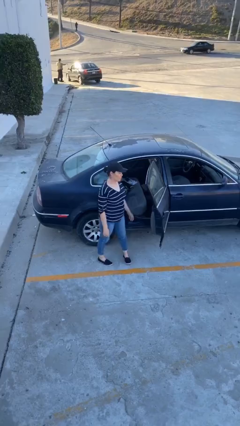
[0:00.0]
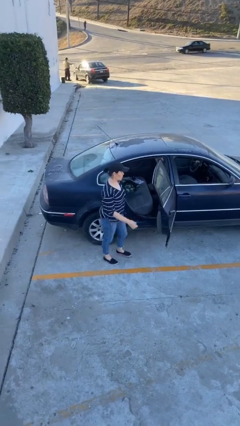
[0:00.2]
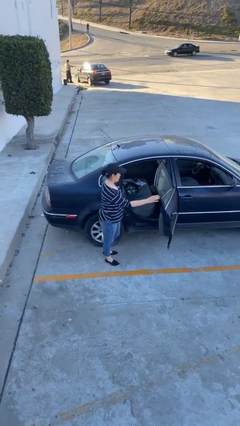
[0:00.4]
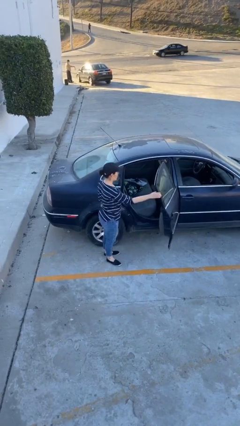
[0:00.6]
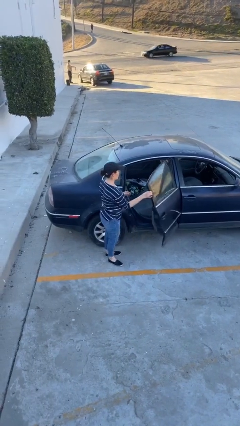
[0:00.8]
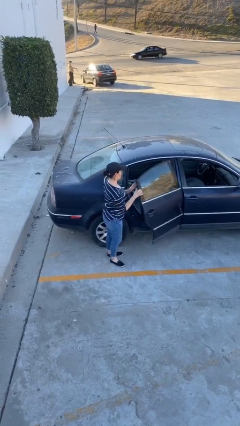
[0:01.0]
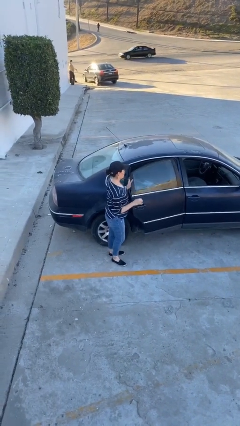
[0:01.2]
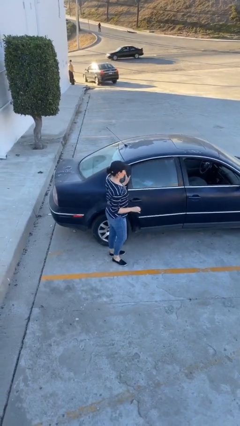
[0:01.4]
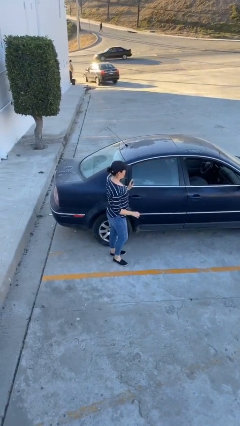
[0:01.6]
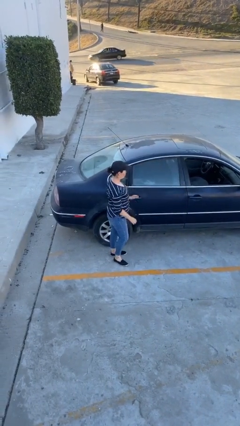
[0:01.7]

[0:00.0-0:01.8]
person closes car door

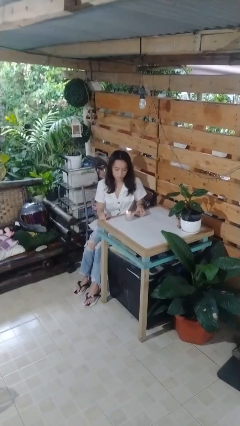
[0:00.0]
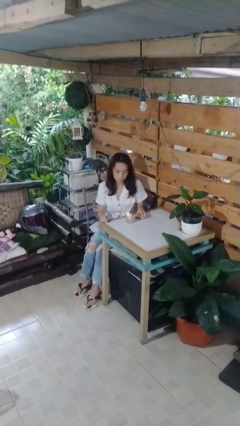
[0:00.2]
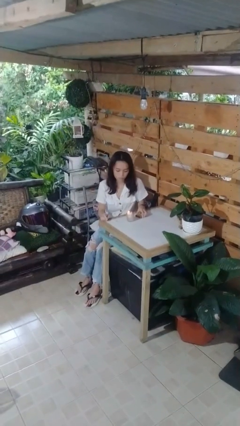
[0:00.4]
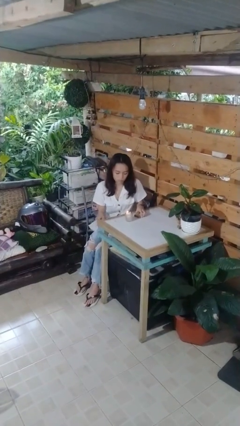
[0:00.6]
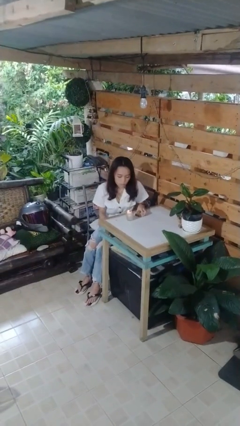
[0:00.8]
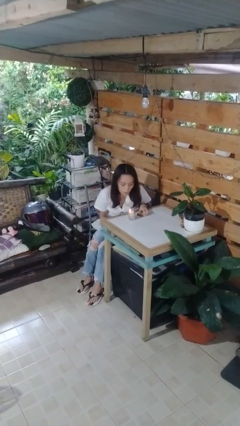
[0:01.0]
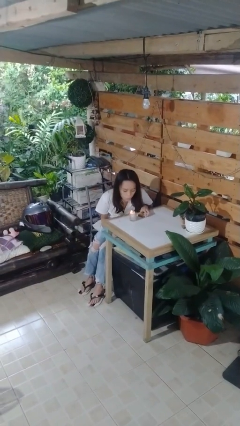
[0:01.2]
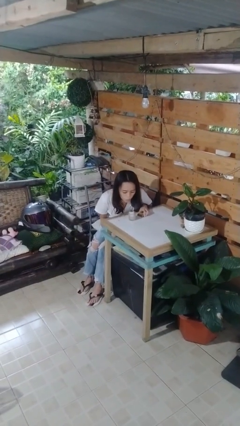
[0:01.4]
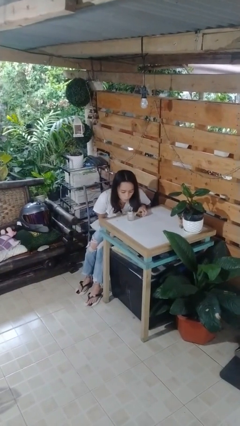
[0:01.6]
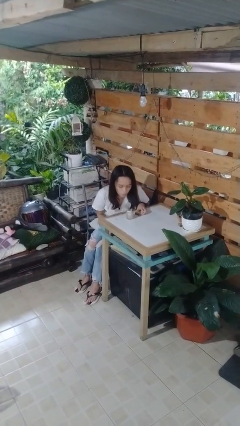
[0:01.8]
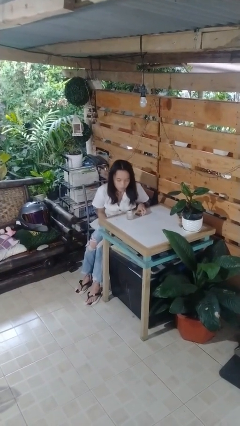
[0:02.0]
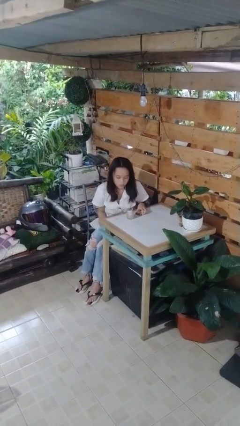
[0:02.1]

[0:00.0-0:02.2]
person extinguishes candle

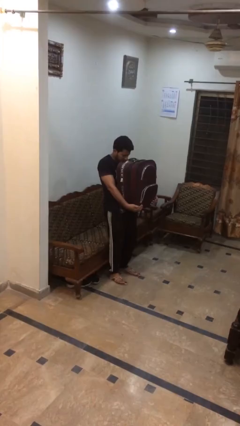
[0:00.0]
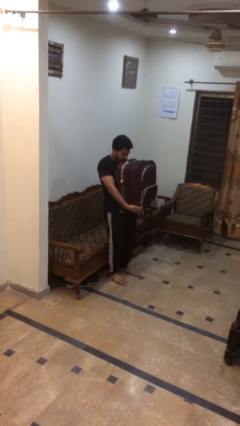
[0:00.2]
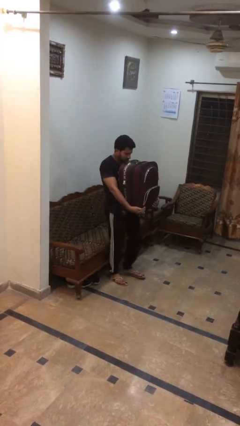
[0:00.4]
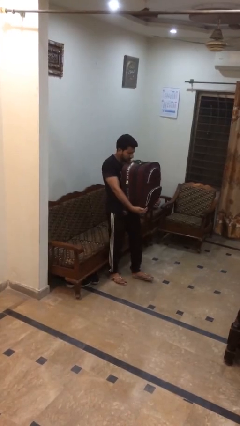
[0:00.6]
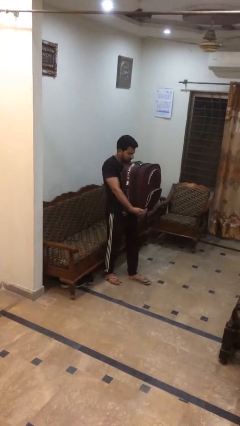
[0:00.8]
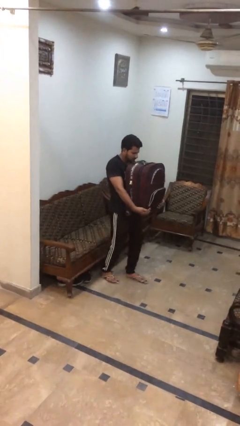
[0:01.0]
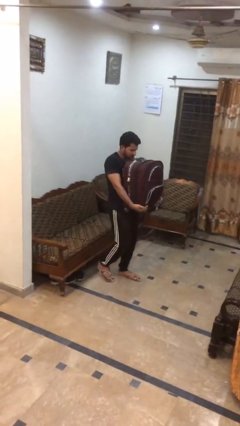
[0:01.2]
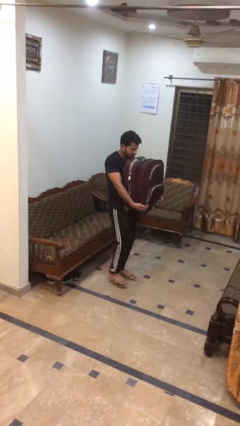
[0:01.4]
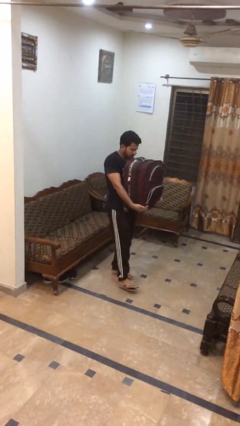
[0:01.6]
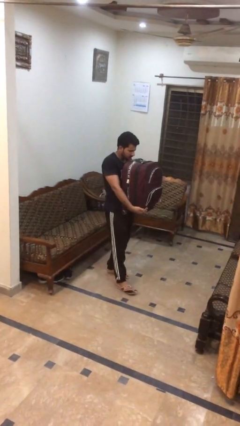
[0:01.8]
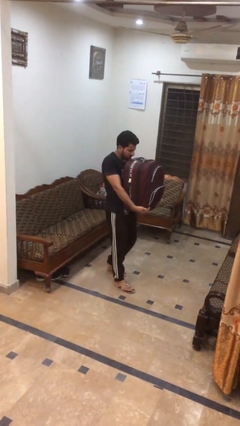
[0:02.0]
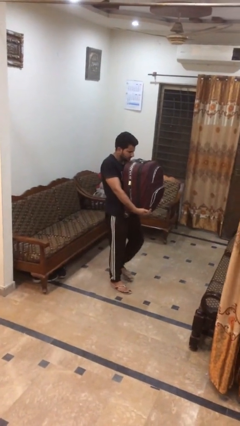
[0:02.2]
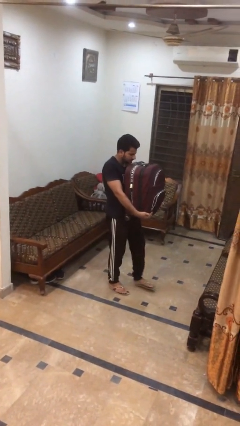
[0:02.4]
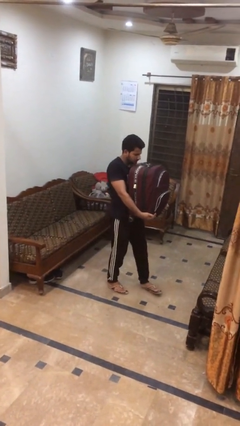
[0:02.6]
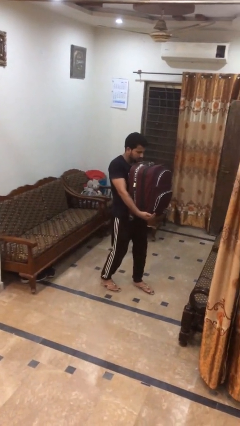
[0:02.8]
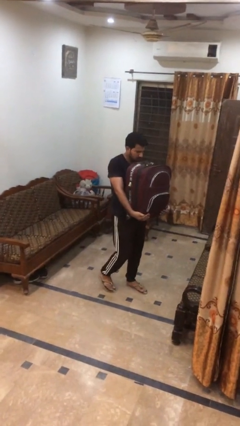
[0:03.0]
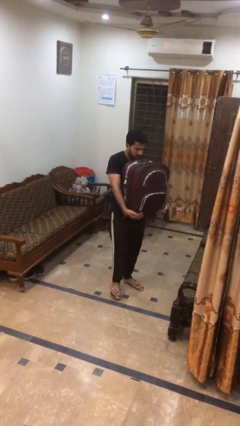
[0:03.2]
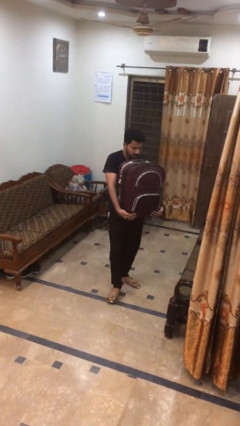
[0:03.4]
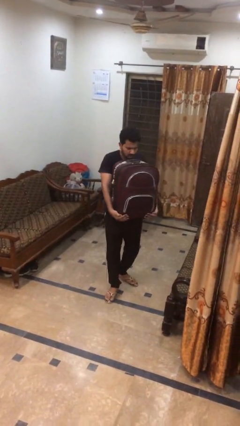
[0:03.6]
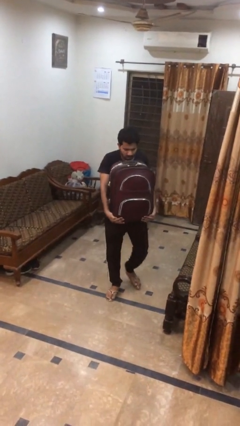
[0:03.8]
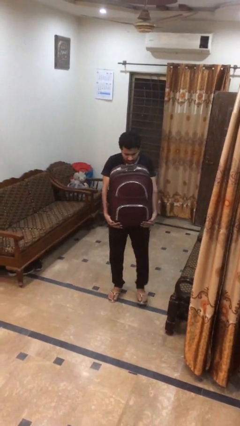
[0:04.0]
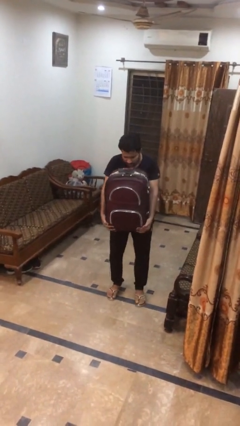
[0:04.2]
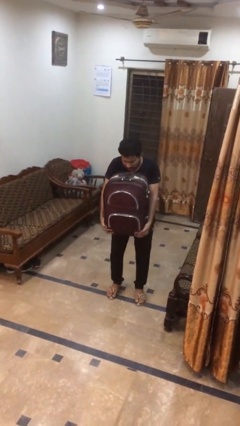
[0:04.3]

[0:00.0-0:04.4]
person carries heavy object

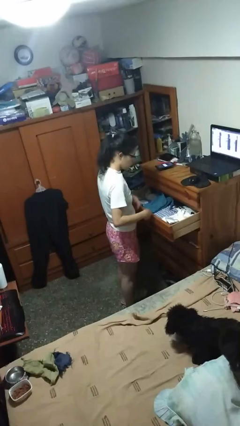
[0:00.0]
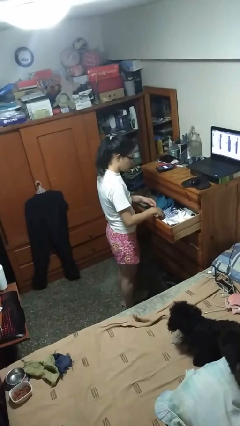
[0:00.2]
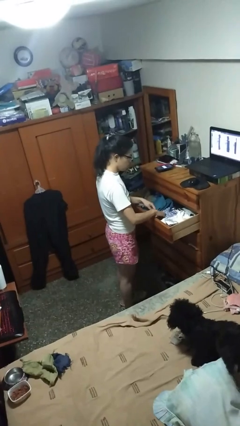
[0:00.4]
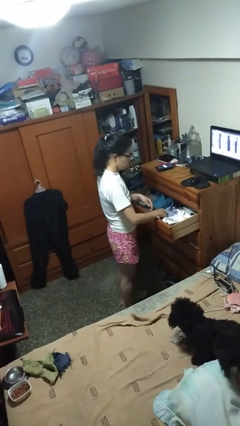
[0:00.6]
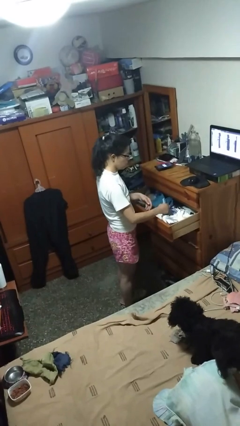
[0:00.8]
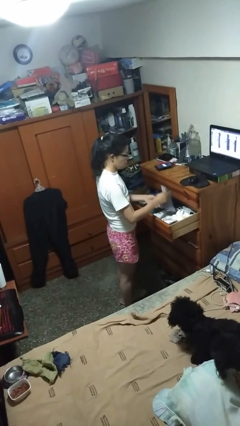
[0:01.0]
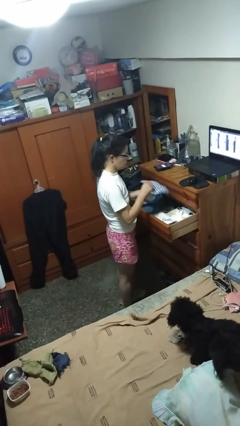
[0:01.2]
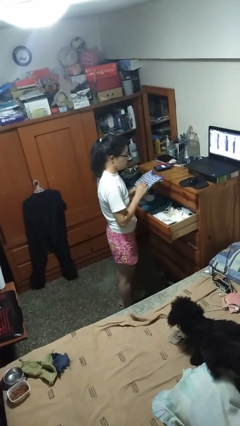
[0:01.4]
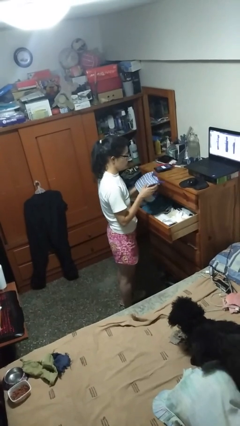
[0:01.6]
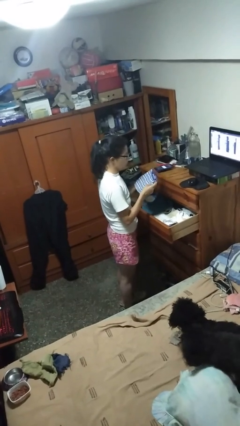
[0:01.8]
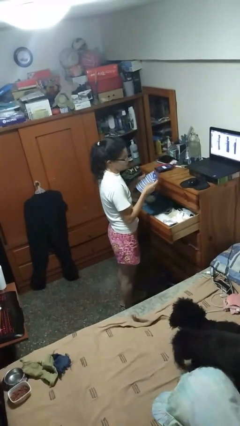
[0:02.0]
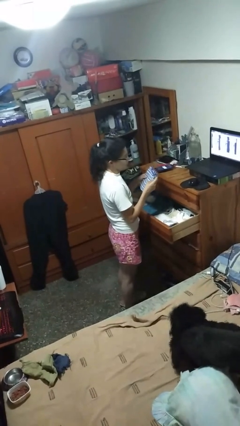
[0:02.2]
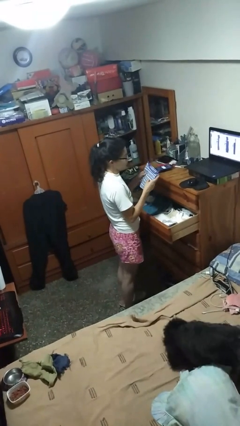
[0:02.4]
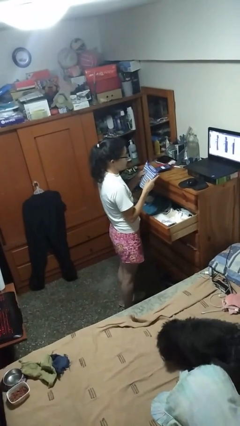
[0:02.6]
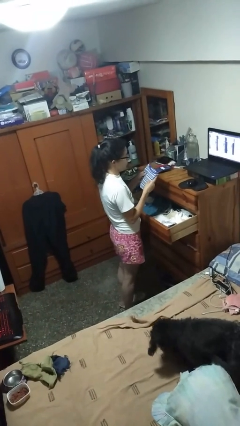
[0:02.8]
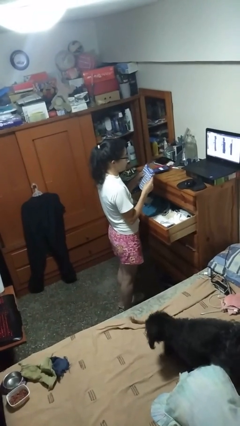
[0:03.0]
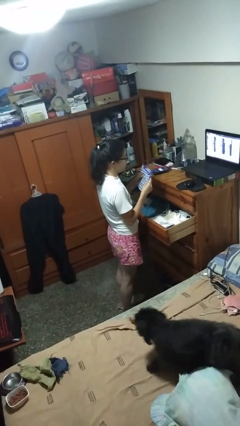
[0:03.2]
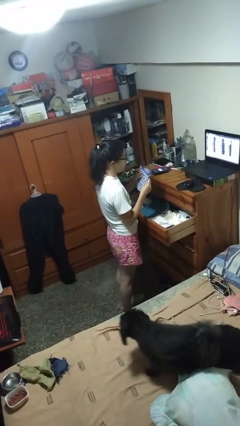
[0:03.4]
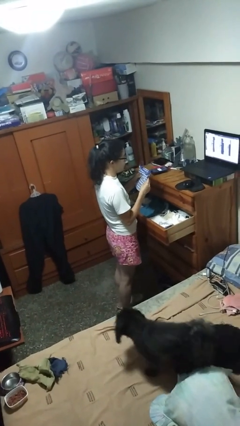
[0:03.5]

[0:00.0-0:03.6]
person takes clothes from dresser

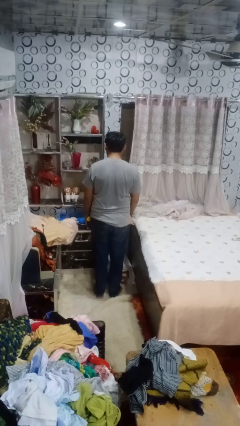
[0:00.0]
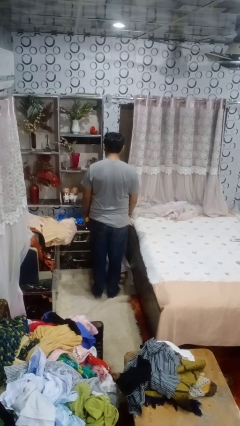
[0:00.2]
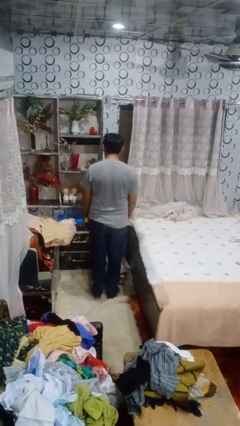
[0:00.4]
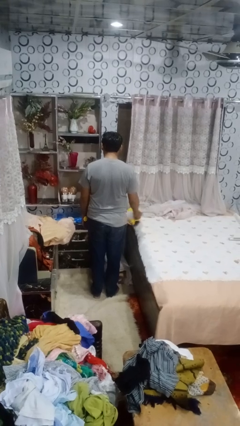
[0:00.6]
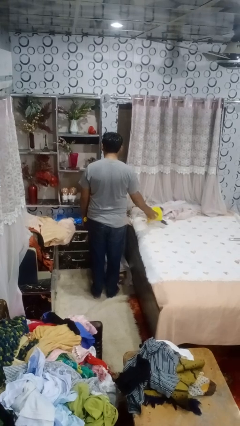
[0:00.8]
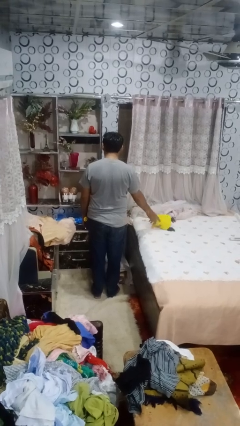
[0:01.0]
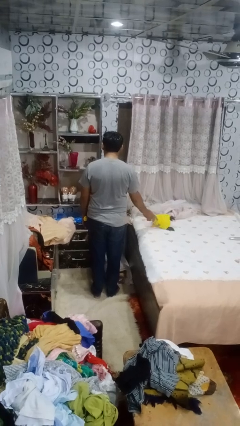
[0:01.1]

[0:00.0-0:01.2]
person throws object on bed

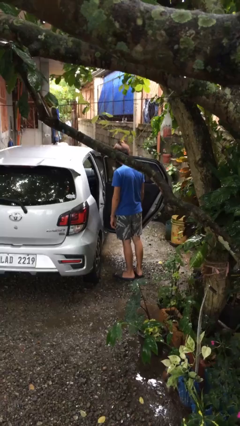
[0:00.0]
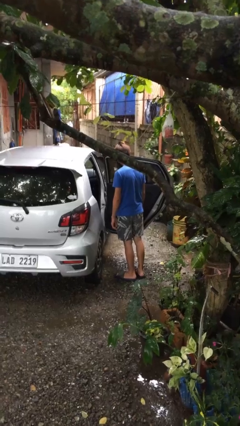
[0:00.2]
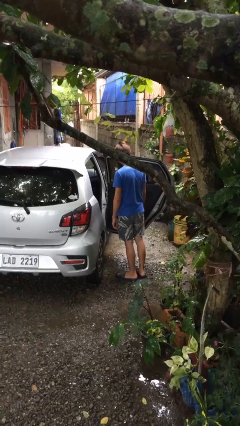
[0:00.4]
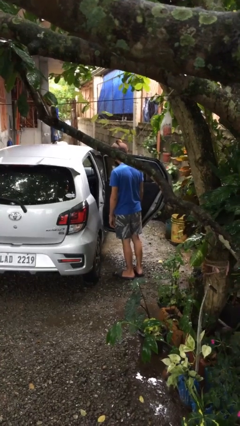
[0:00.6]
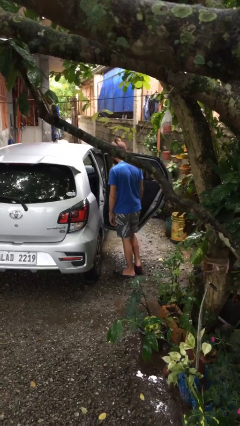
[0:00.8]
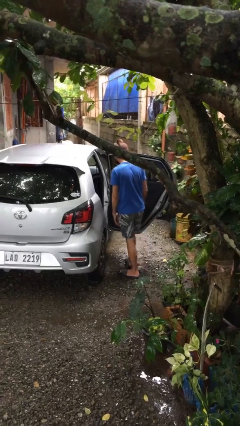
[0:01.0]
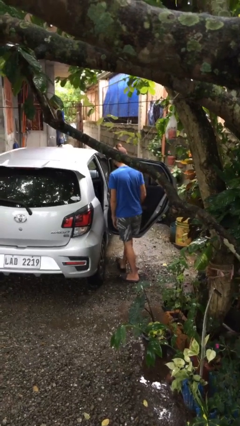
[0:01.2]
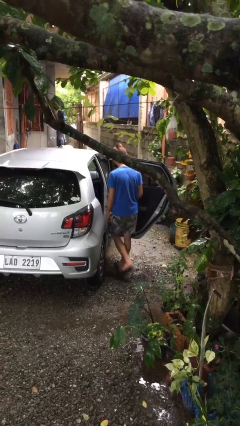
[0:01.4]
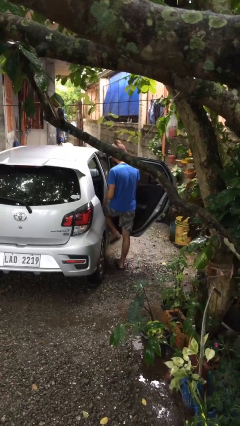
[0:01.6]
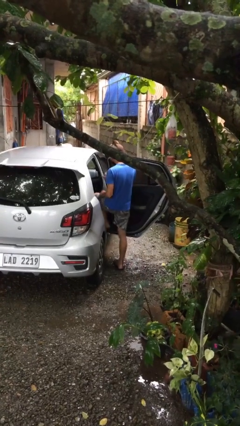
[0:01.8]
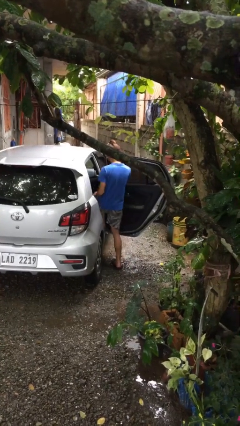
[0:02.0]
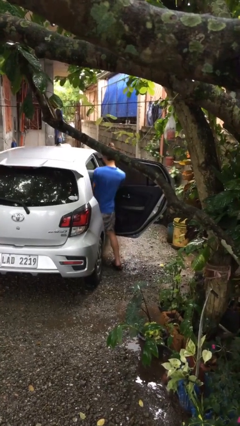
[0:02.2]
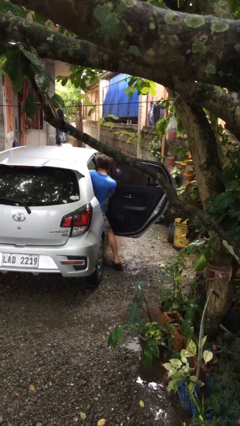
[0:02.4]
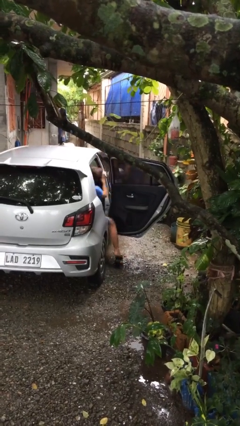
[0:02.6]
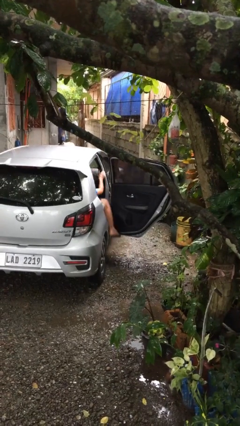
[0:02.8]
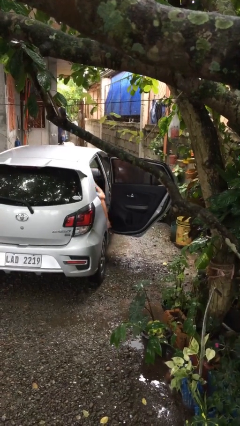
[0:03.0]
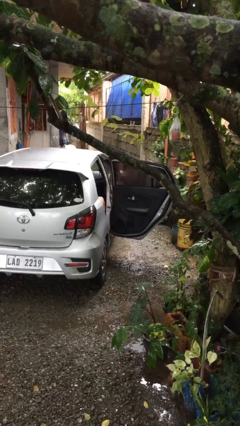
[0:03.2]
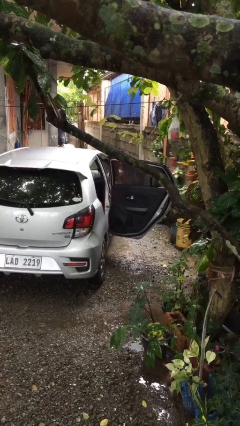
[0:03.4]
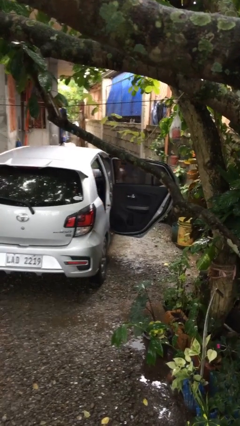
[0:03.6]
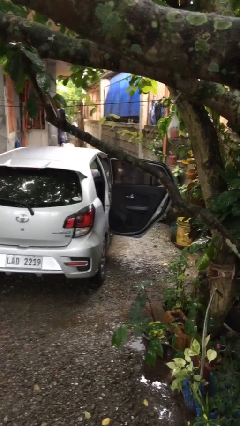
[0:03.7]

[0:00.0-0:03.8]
person enters car

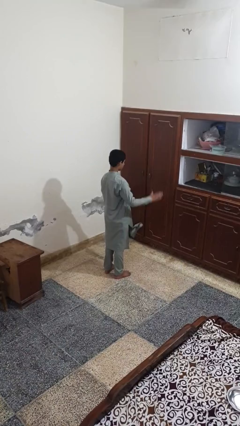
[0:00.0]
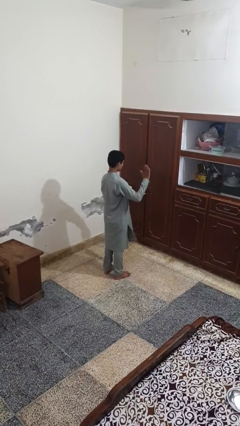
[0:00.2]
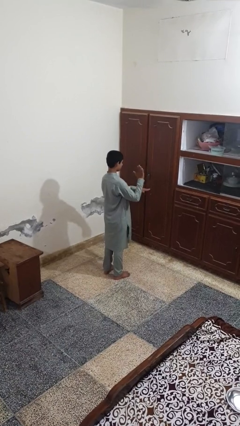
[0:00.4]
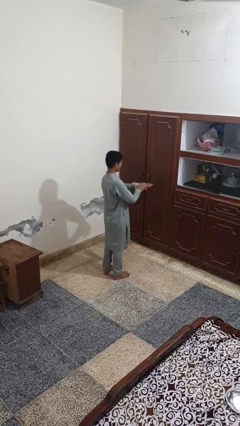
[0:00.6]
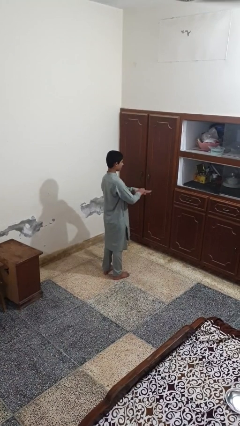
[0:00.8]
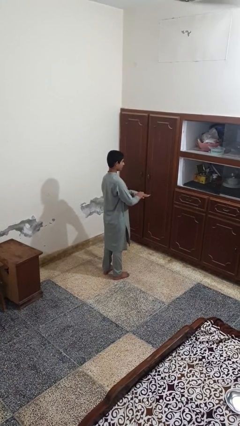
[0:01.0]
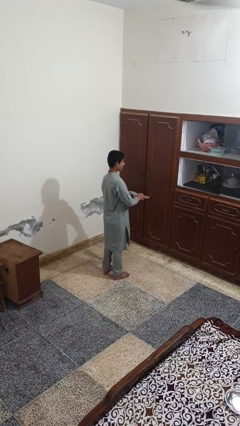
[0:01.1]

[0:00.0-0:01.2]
person swats bug
